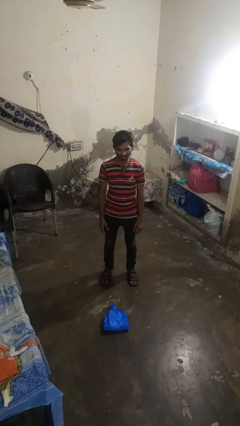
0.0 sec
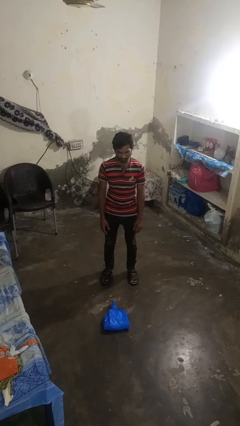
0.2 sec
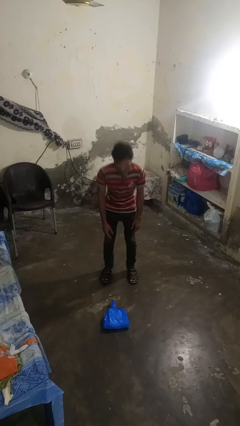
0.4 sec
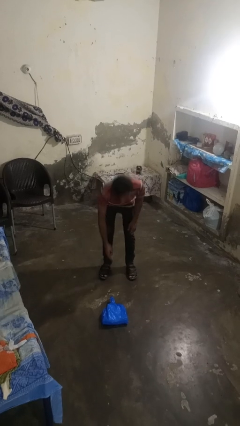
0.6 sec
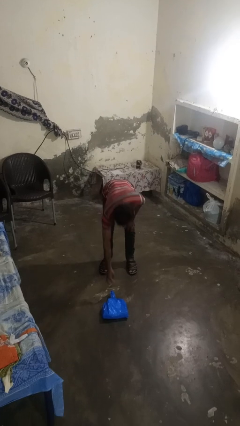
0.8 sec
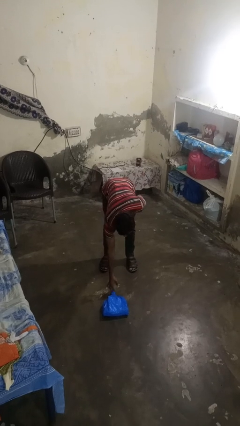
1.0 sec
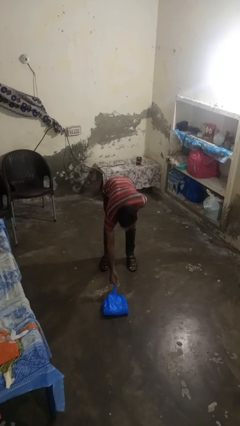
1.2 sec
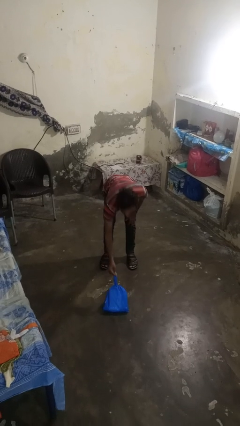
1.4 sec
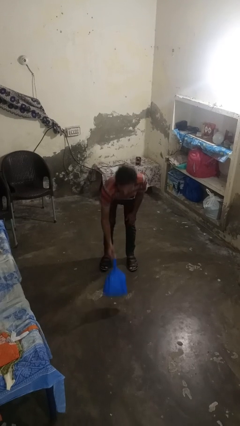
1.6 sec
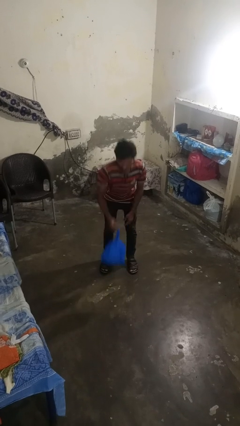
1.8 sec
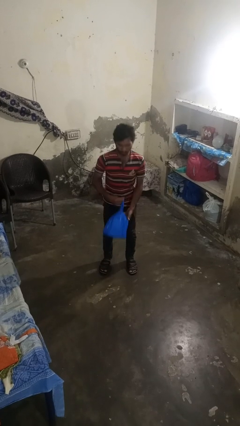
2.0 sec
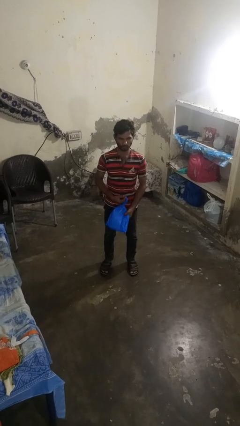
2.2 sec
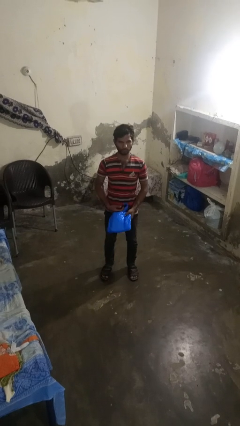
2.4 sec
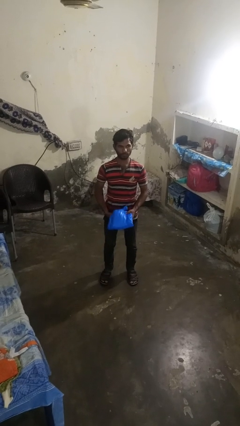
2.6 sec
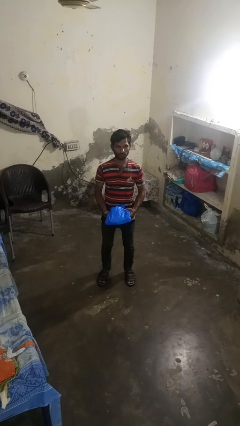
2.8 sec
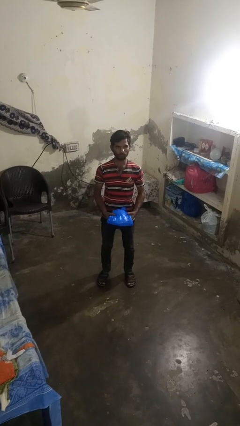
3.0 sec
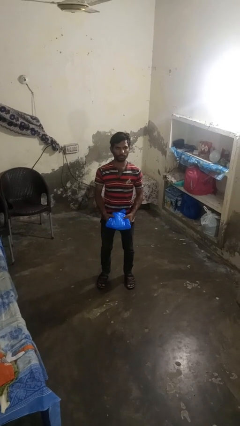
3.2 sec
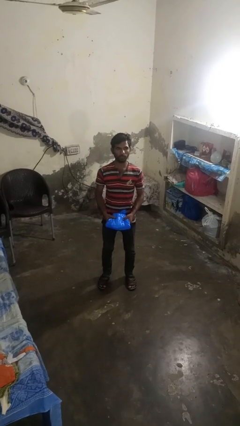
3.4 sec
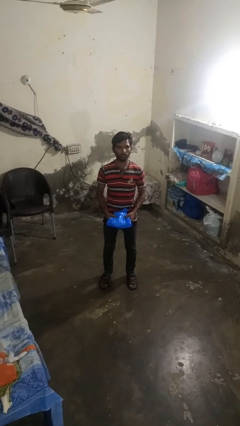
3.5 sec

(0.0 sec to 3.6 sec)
person picks up object from floor

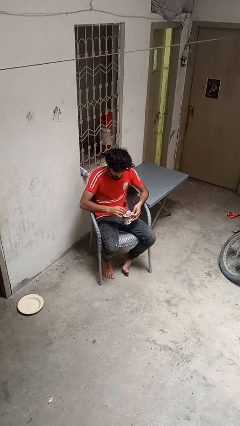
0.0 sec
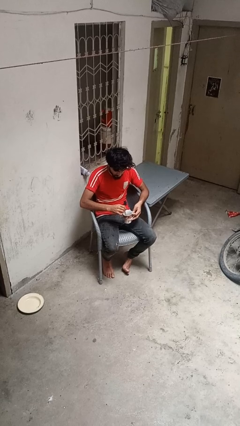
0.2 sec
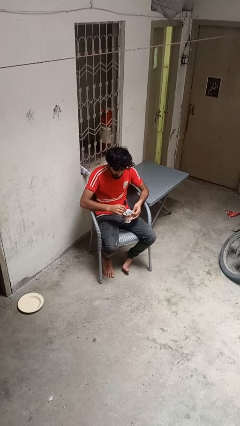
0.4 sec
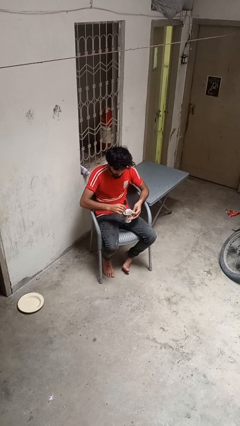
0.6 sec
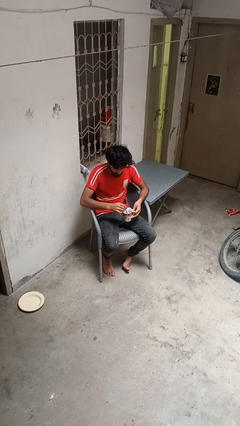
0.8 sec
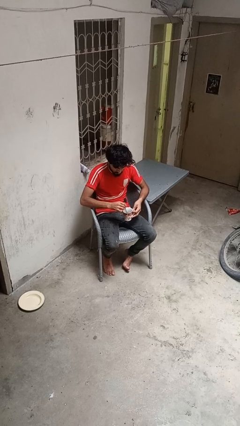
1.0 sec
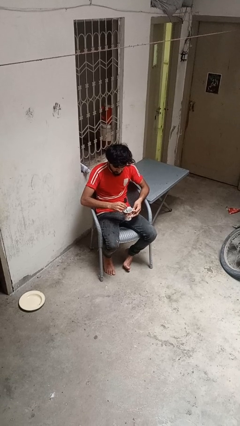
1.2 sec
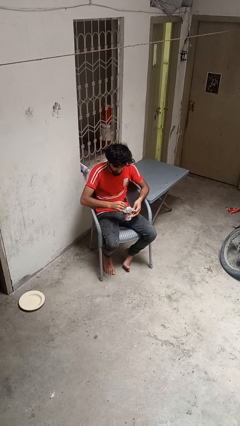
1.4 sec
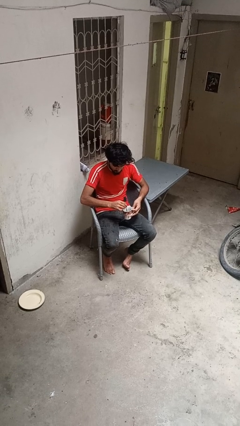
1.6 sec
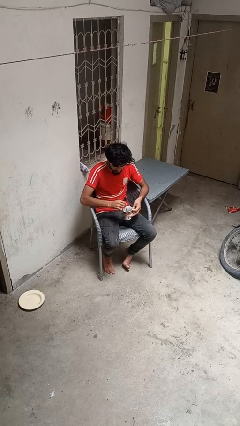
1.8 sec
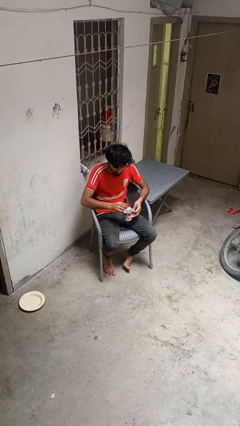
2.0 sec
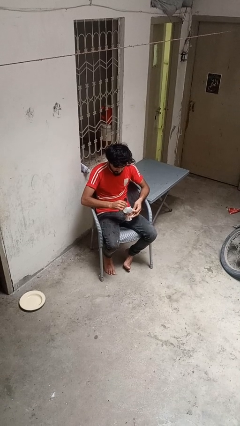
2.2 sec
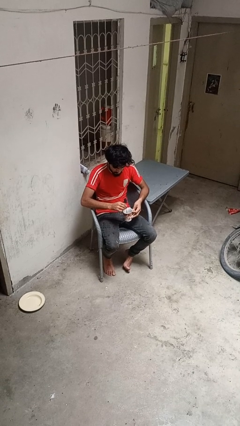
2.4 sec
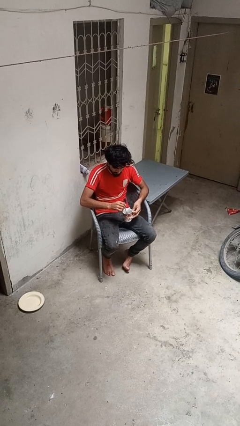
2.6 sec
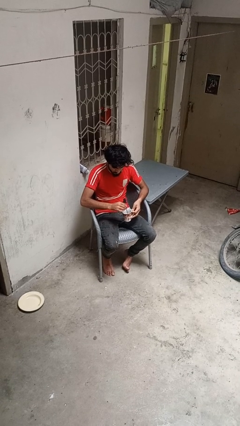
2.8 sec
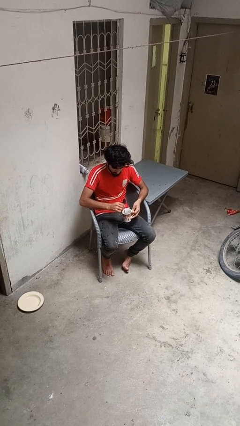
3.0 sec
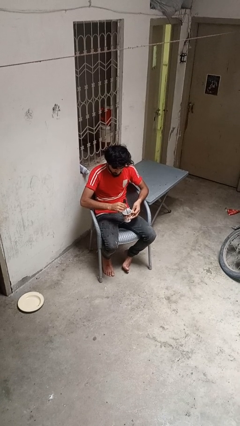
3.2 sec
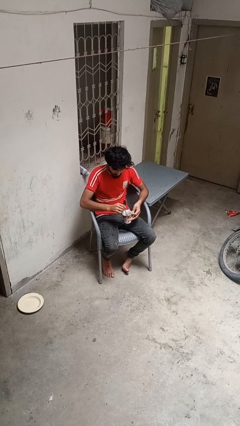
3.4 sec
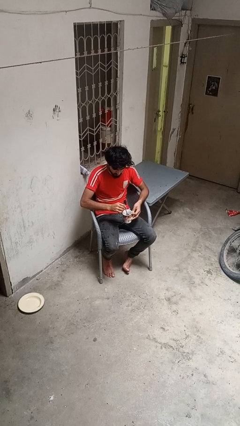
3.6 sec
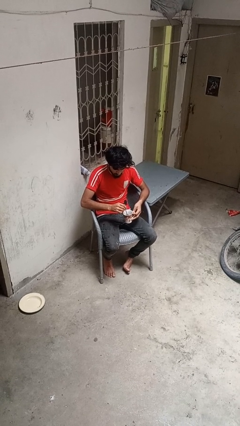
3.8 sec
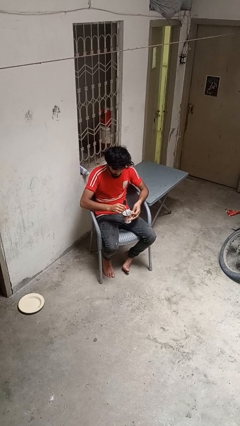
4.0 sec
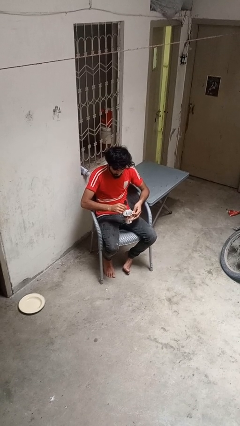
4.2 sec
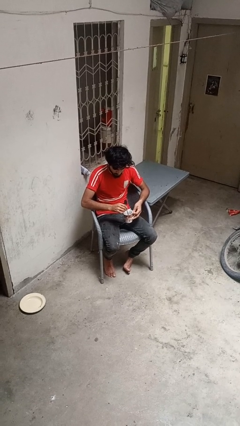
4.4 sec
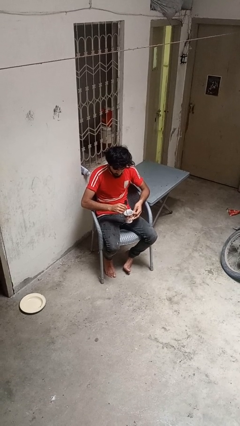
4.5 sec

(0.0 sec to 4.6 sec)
person stirs mug

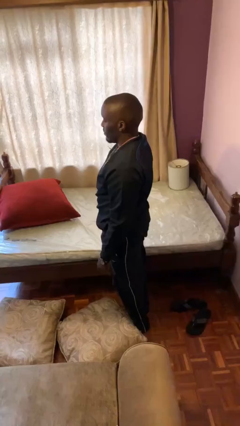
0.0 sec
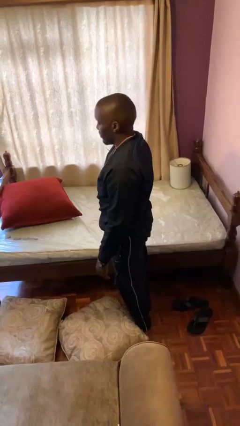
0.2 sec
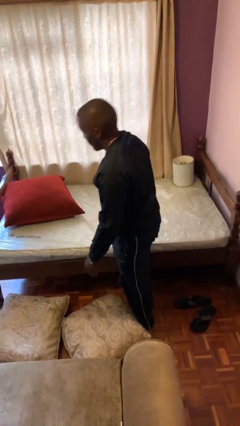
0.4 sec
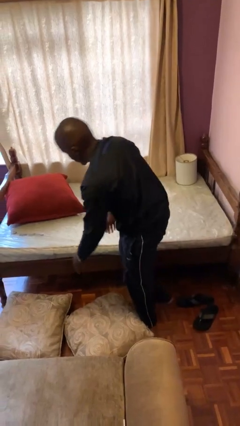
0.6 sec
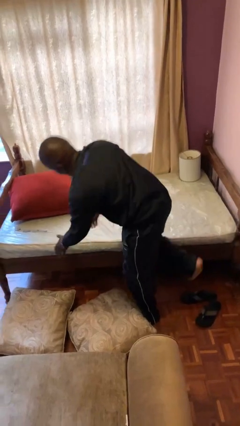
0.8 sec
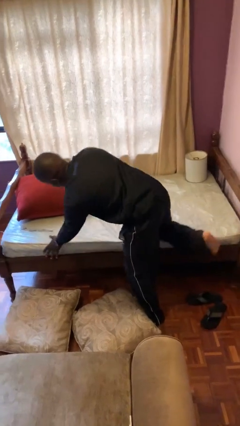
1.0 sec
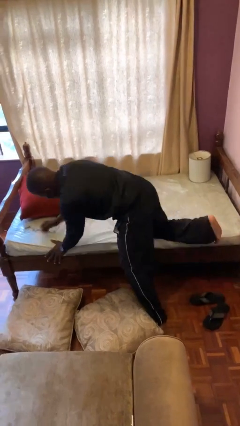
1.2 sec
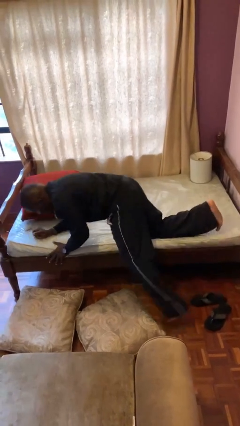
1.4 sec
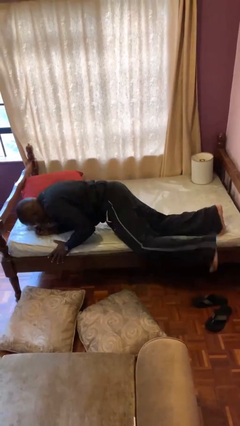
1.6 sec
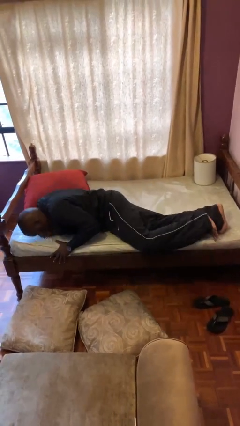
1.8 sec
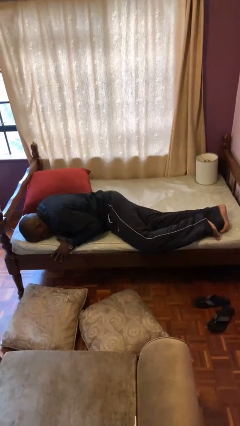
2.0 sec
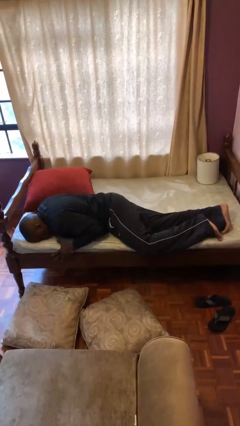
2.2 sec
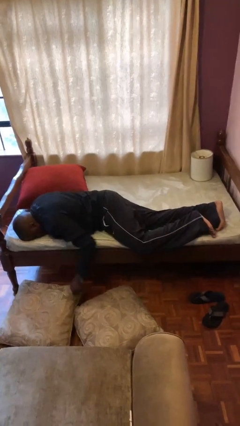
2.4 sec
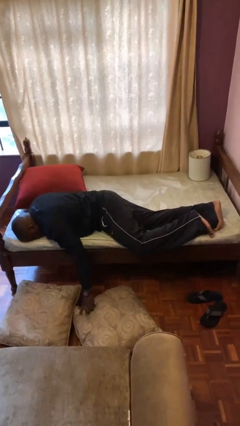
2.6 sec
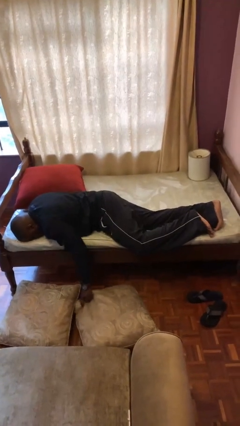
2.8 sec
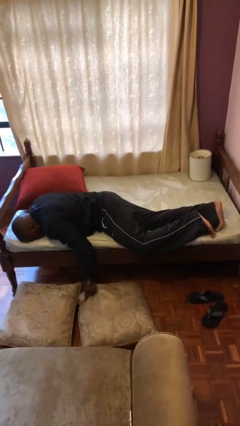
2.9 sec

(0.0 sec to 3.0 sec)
person lies down on bed

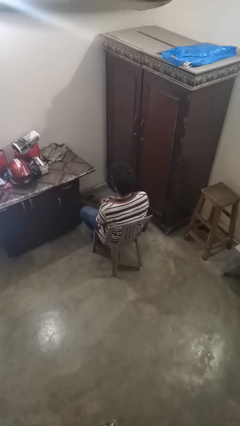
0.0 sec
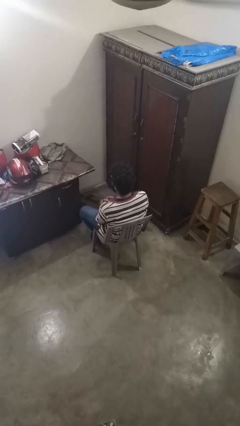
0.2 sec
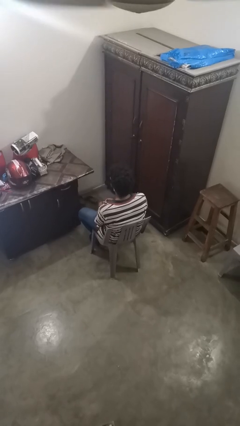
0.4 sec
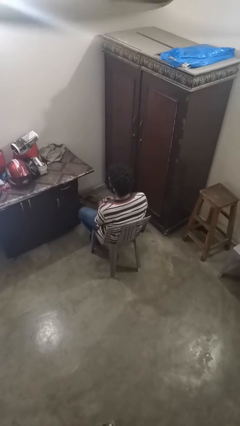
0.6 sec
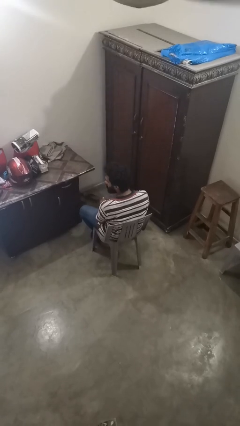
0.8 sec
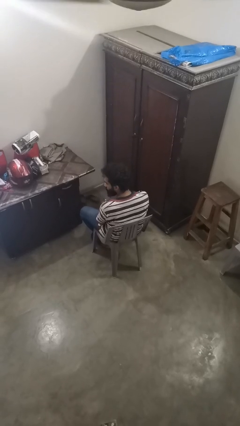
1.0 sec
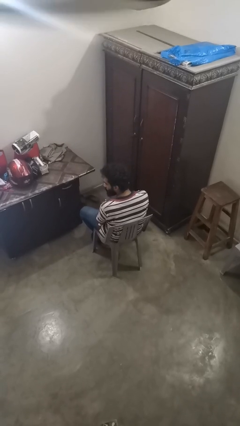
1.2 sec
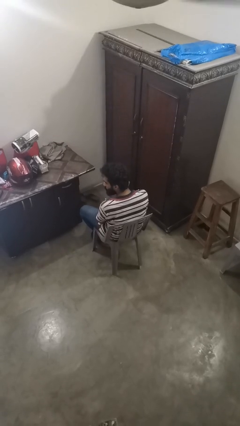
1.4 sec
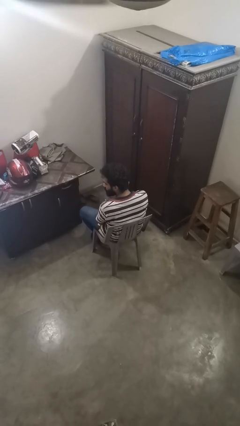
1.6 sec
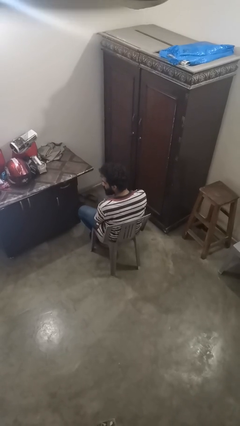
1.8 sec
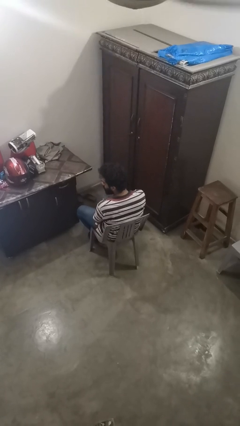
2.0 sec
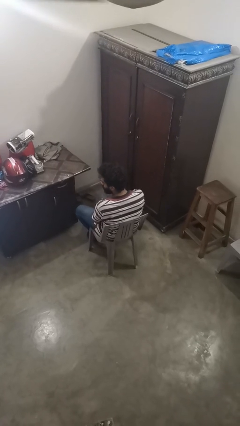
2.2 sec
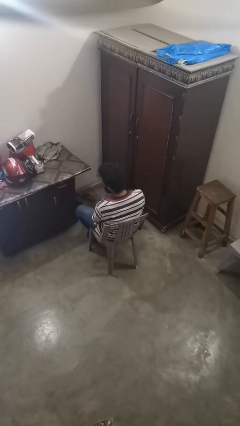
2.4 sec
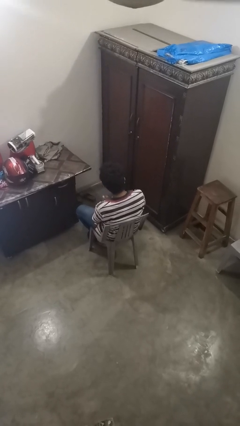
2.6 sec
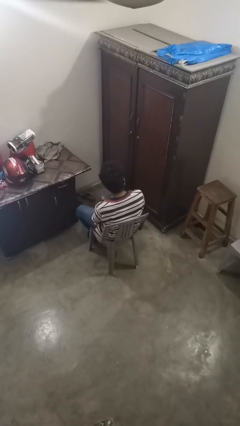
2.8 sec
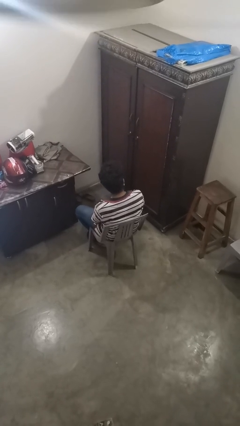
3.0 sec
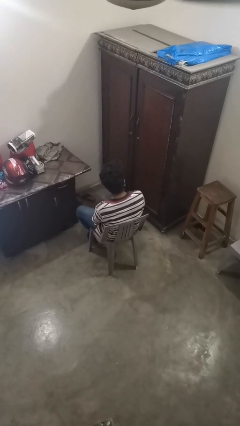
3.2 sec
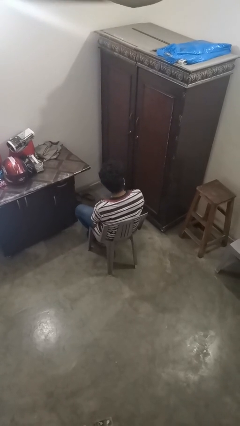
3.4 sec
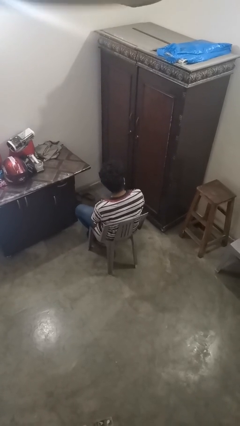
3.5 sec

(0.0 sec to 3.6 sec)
person puts on earrings

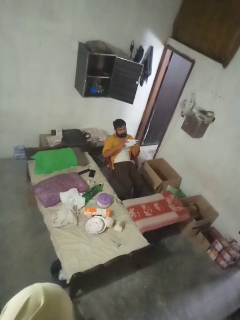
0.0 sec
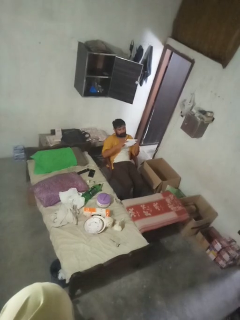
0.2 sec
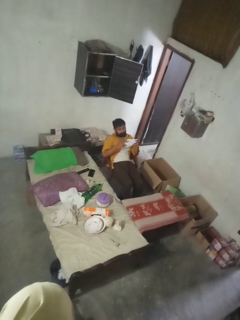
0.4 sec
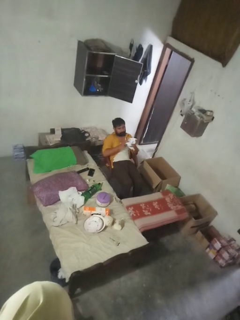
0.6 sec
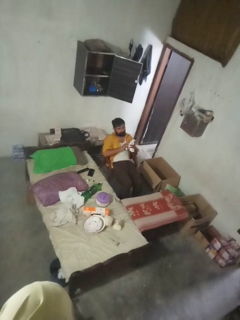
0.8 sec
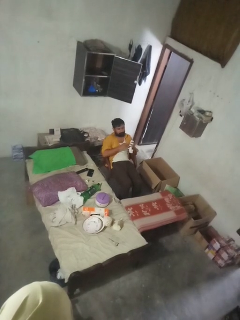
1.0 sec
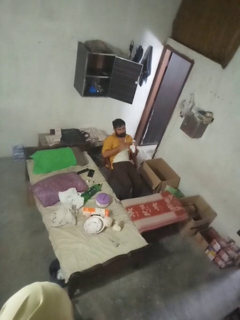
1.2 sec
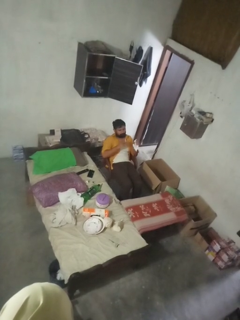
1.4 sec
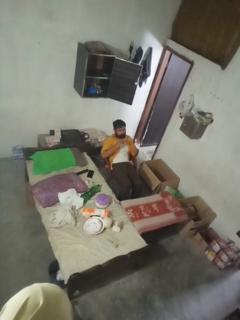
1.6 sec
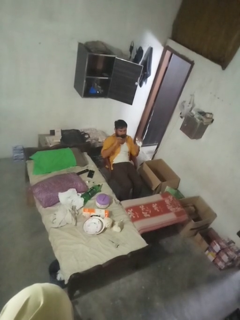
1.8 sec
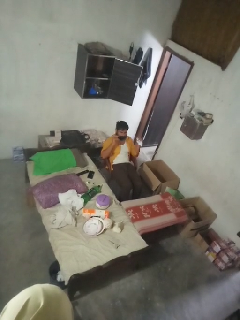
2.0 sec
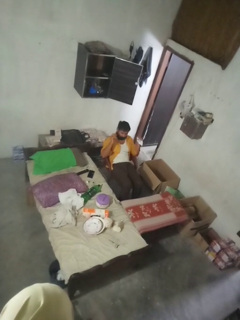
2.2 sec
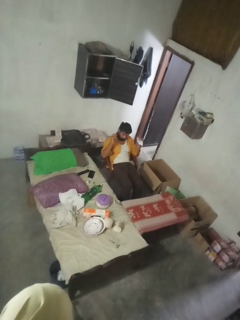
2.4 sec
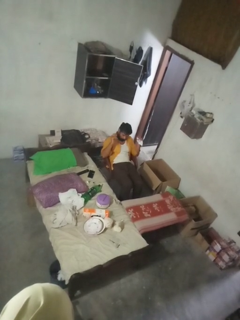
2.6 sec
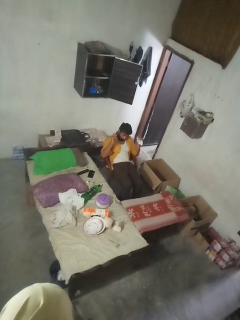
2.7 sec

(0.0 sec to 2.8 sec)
person crumples paper

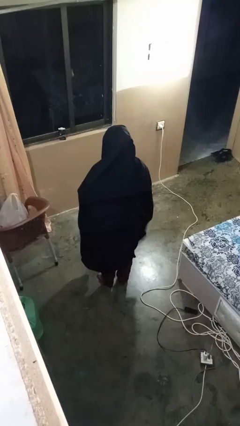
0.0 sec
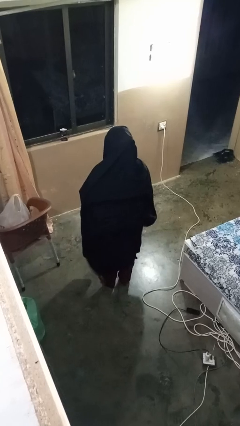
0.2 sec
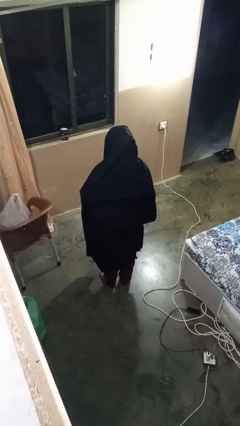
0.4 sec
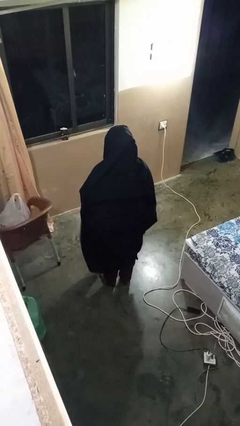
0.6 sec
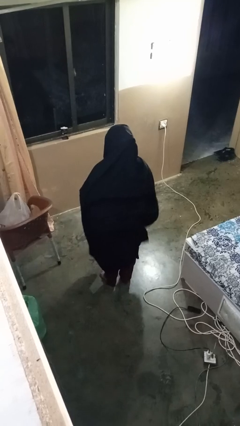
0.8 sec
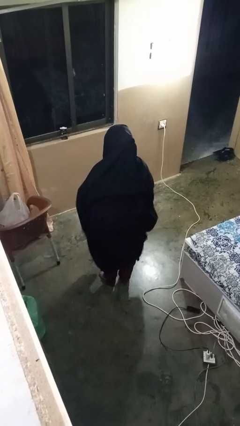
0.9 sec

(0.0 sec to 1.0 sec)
person gestures swipe down
